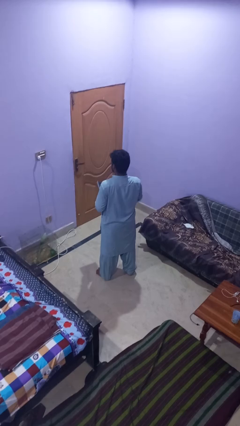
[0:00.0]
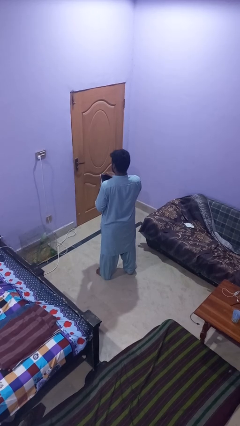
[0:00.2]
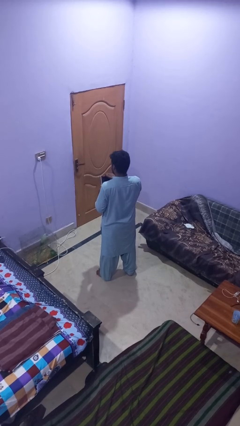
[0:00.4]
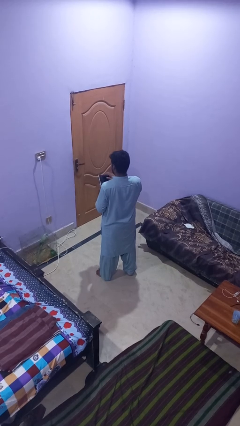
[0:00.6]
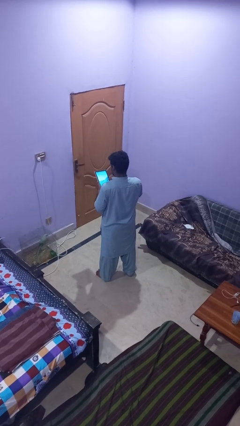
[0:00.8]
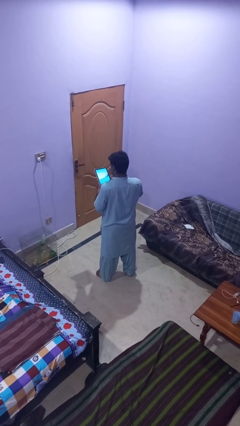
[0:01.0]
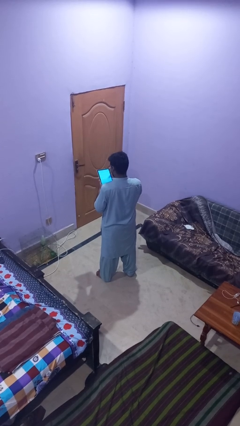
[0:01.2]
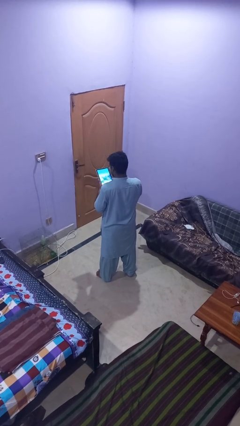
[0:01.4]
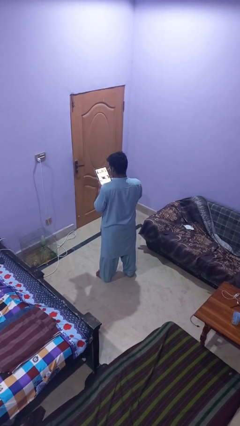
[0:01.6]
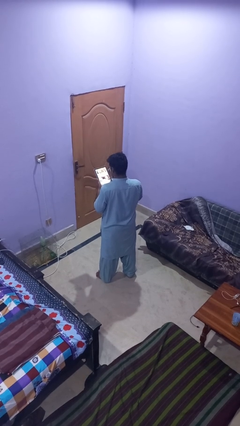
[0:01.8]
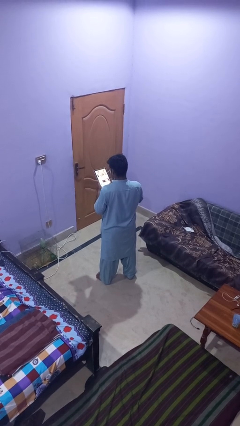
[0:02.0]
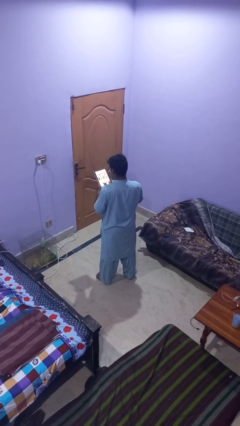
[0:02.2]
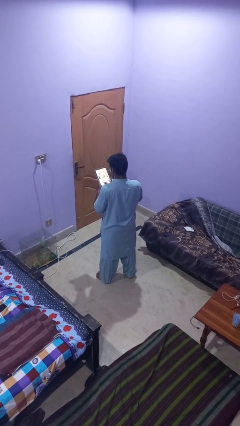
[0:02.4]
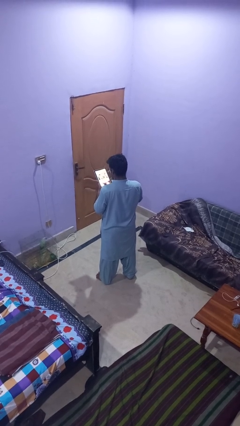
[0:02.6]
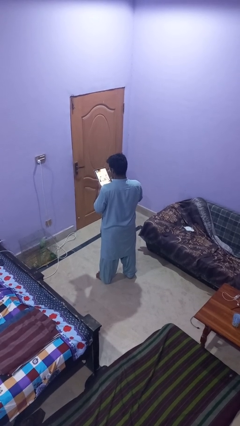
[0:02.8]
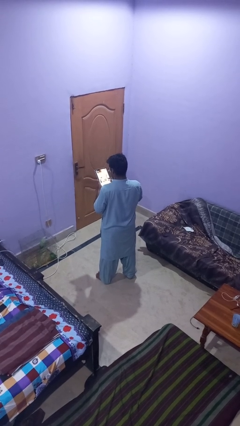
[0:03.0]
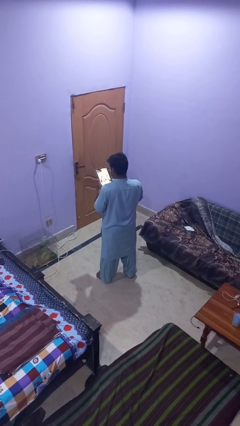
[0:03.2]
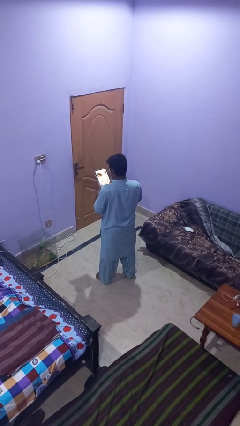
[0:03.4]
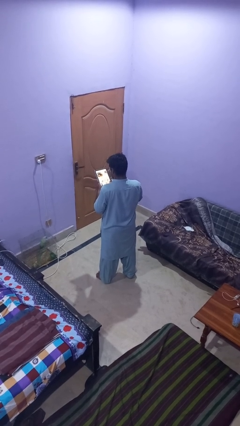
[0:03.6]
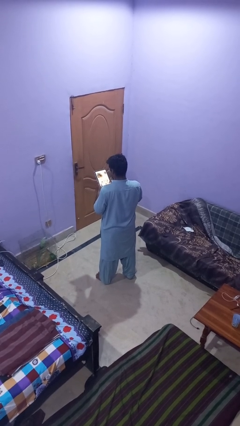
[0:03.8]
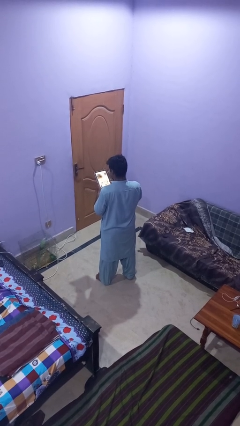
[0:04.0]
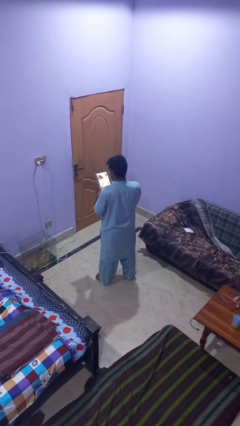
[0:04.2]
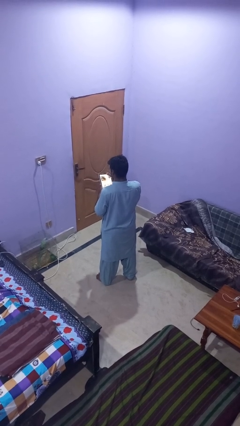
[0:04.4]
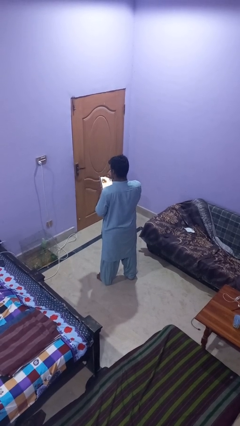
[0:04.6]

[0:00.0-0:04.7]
person interacts with tablet

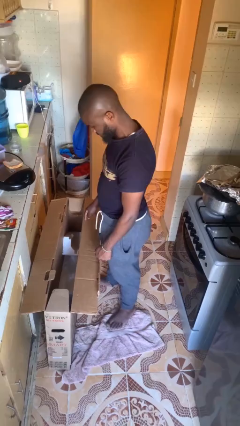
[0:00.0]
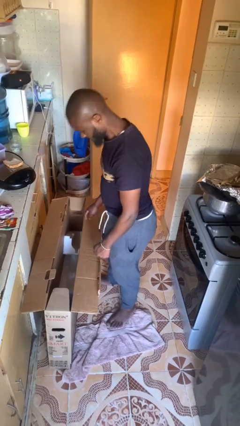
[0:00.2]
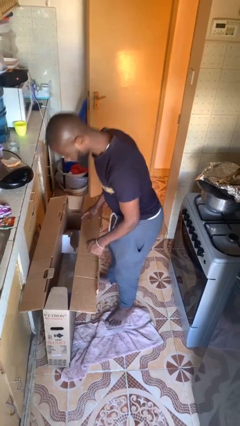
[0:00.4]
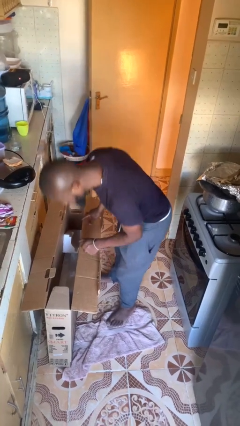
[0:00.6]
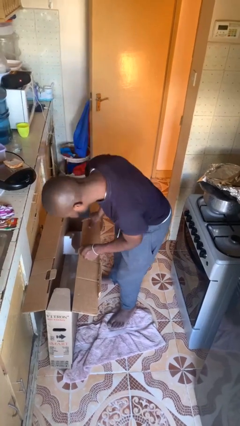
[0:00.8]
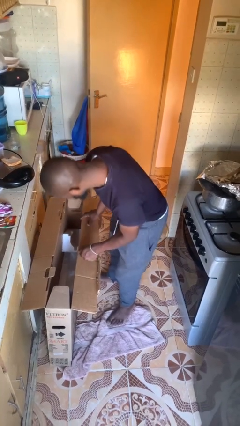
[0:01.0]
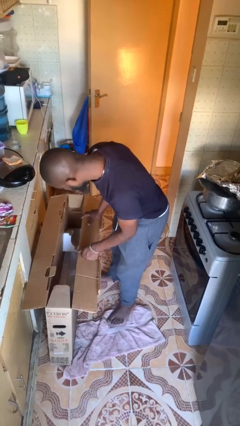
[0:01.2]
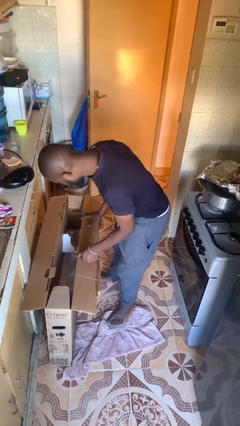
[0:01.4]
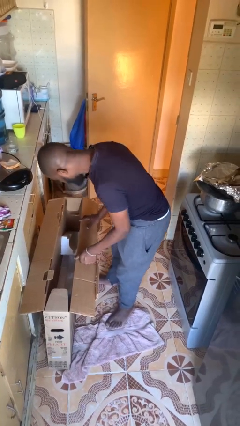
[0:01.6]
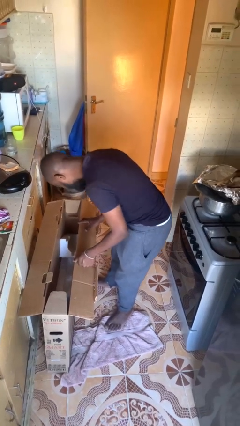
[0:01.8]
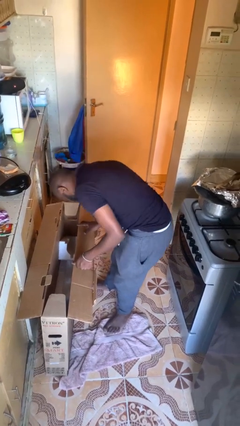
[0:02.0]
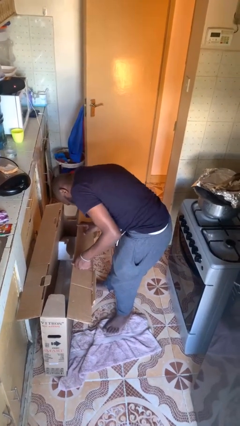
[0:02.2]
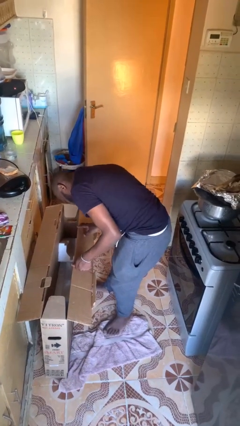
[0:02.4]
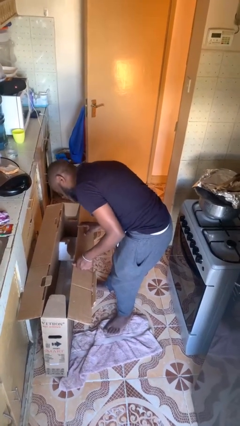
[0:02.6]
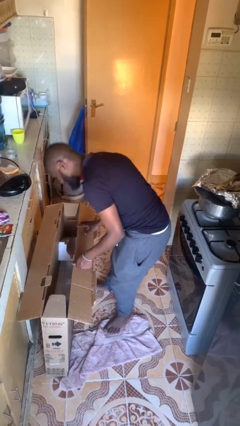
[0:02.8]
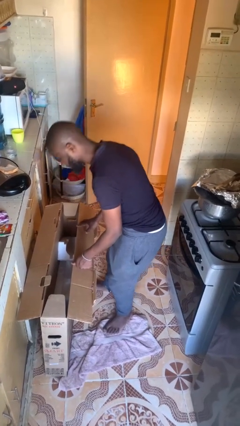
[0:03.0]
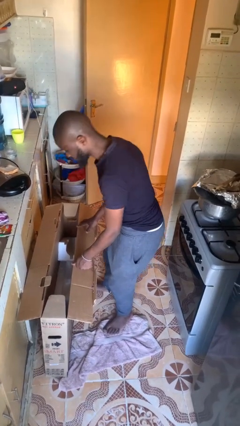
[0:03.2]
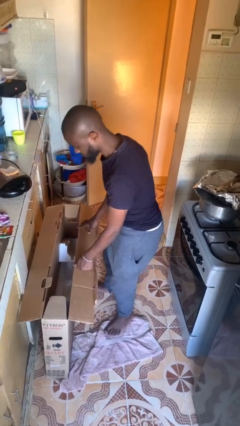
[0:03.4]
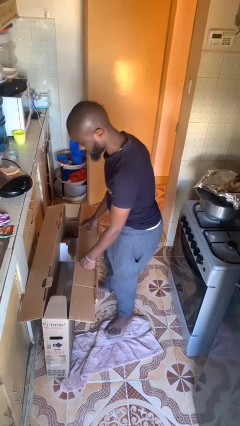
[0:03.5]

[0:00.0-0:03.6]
person searches in box

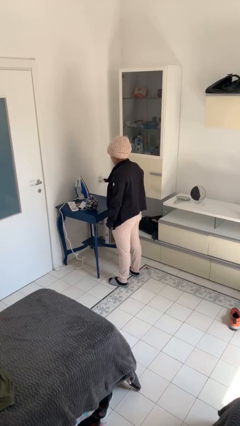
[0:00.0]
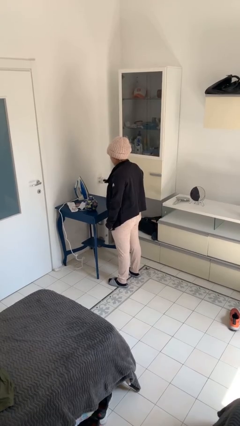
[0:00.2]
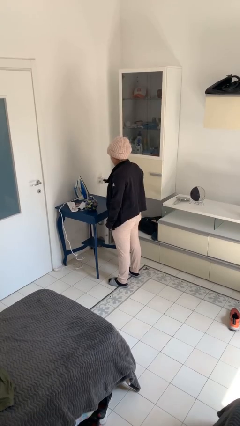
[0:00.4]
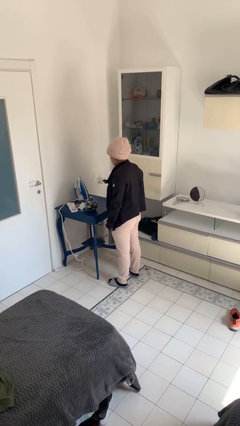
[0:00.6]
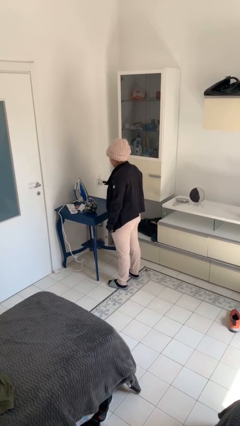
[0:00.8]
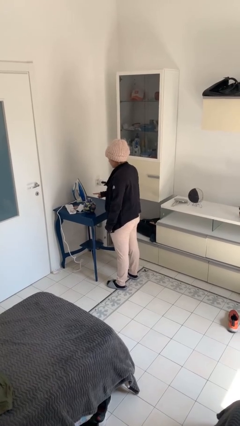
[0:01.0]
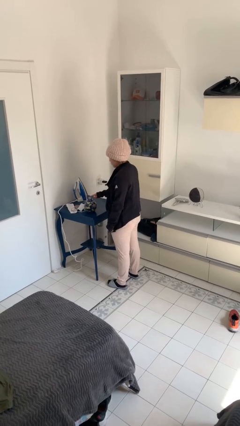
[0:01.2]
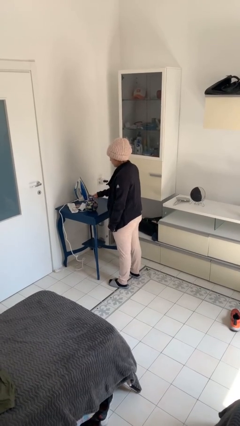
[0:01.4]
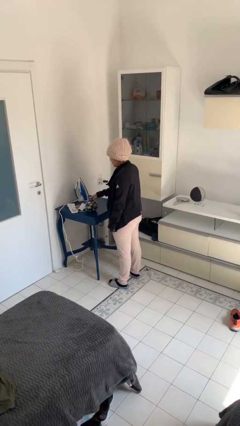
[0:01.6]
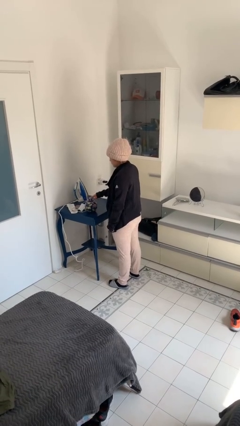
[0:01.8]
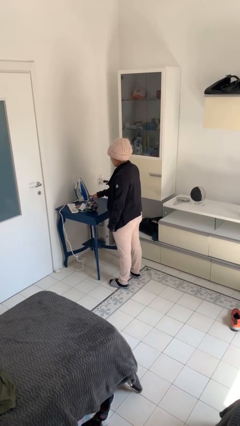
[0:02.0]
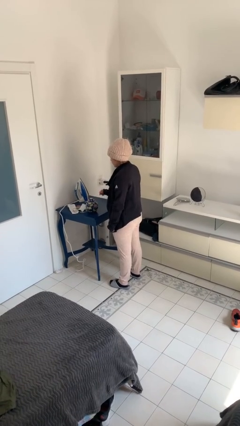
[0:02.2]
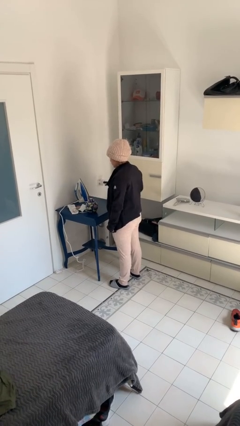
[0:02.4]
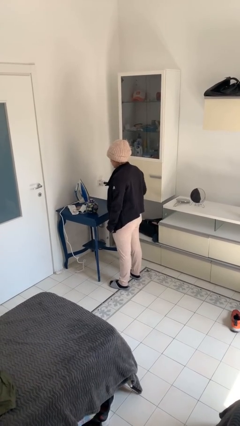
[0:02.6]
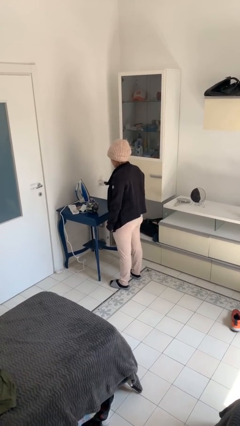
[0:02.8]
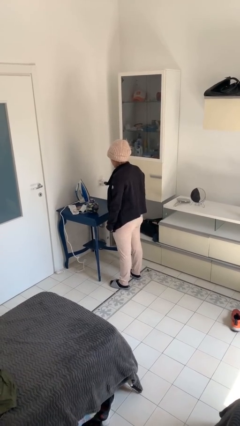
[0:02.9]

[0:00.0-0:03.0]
person taps object with finger

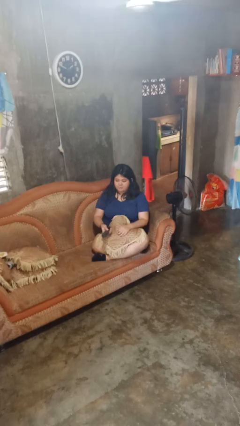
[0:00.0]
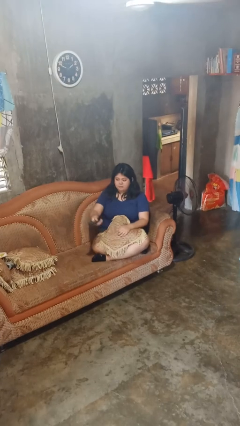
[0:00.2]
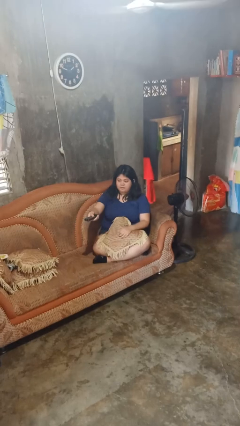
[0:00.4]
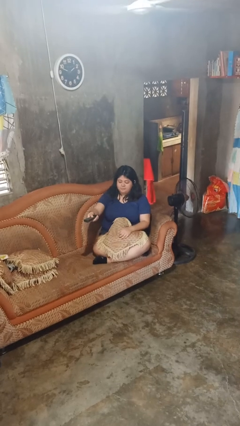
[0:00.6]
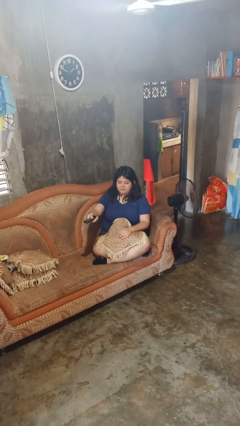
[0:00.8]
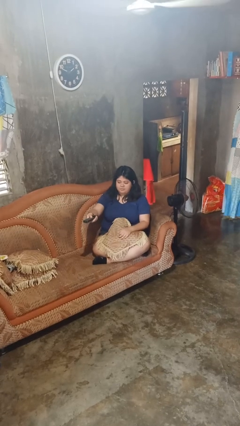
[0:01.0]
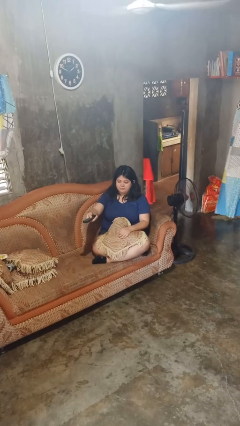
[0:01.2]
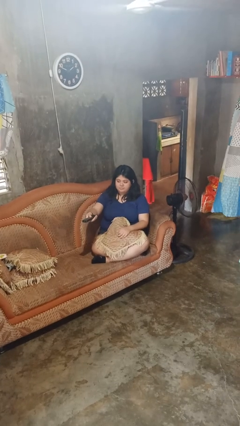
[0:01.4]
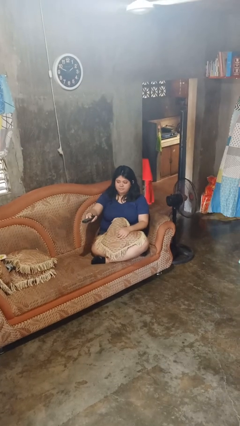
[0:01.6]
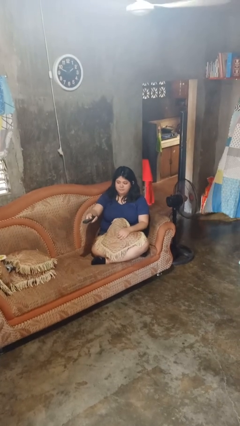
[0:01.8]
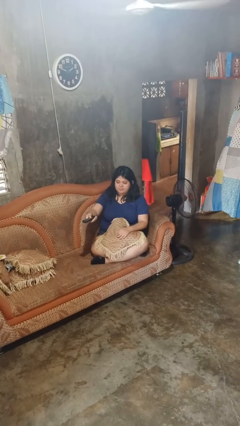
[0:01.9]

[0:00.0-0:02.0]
person uses television remote

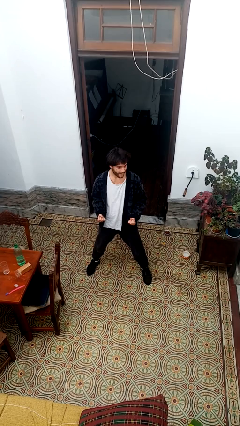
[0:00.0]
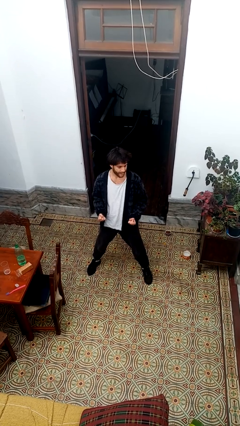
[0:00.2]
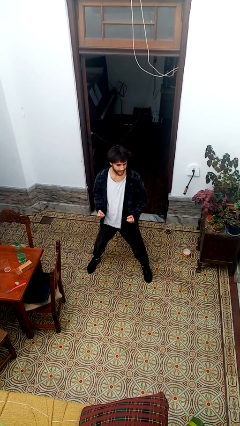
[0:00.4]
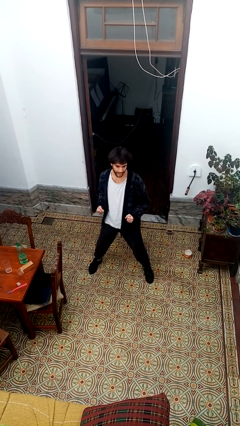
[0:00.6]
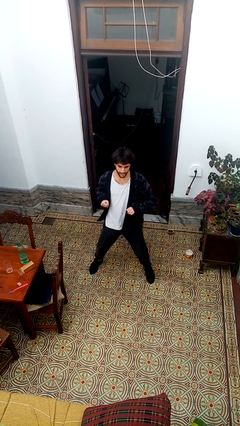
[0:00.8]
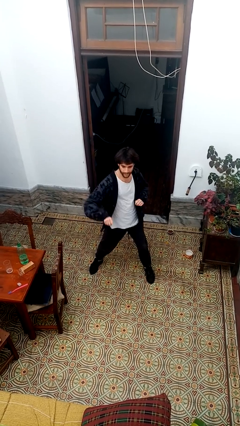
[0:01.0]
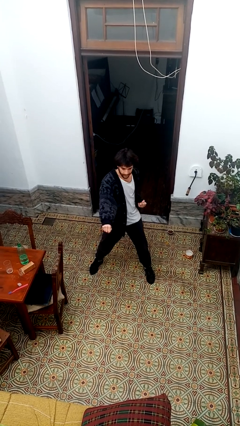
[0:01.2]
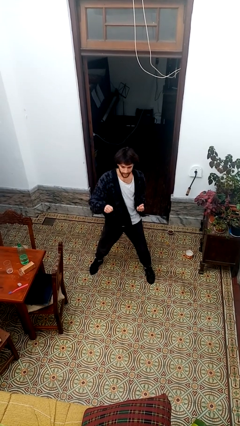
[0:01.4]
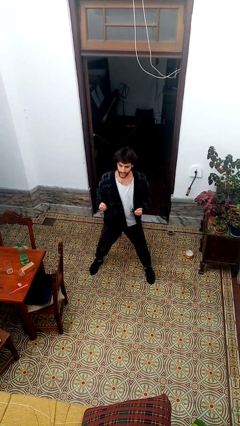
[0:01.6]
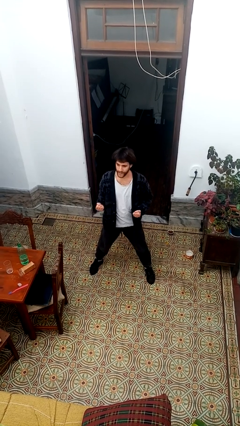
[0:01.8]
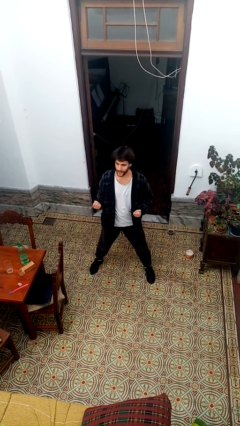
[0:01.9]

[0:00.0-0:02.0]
person punches

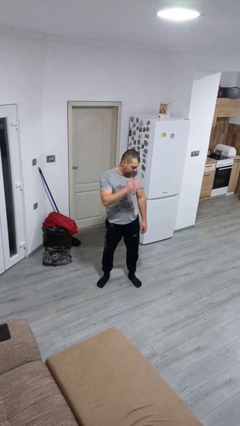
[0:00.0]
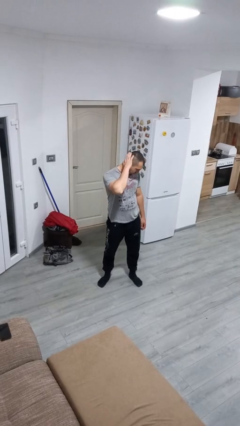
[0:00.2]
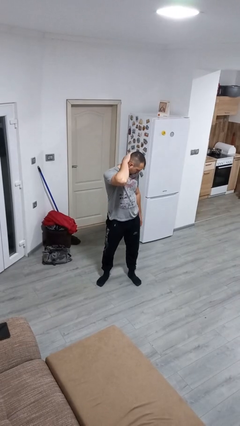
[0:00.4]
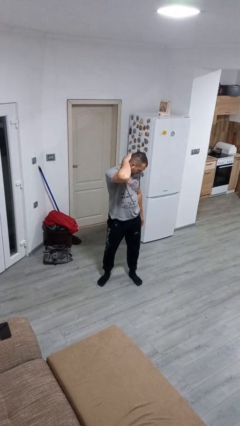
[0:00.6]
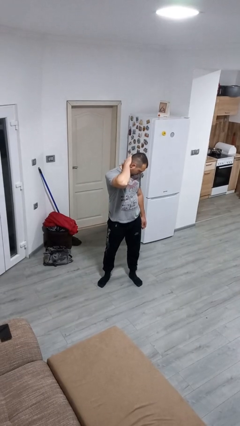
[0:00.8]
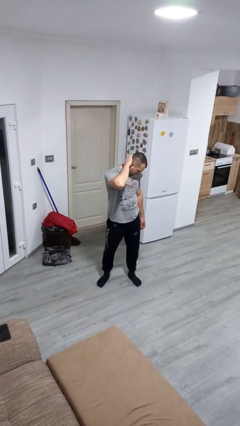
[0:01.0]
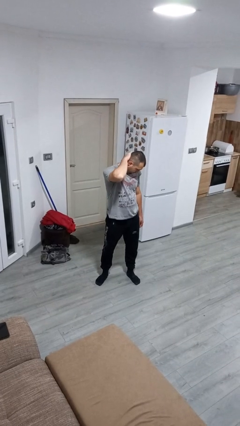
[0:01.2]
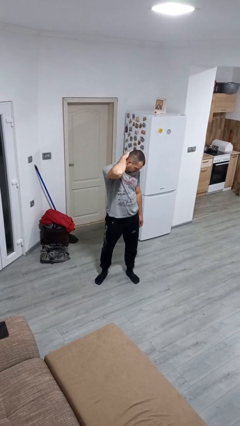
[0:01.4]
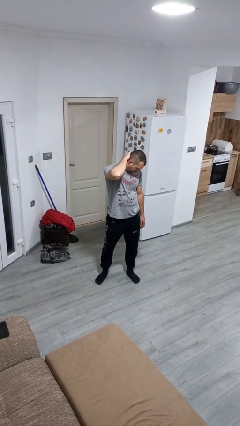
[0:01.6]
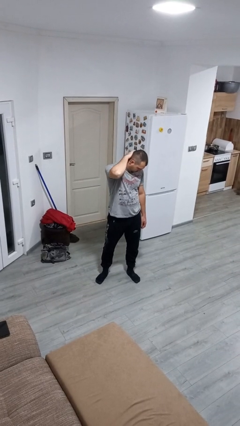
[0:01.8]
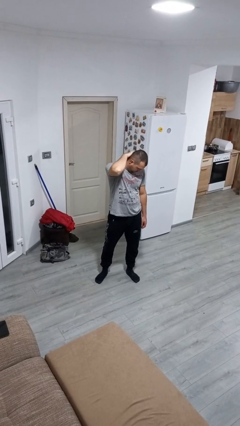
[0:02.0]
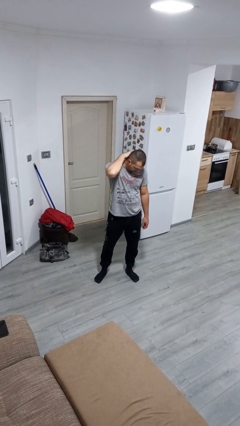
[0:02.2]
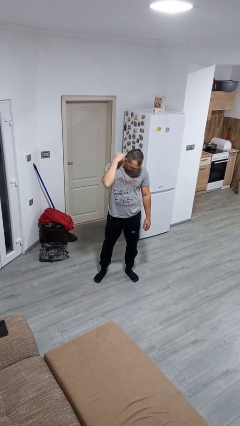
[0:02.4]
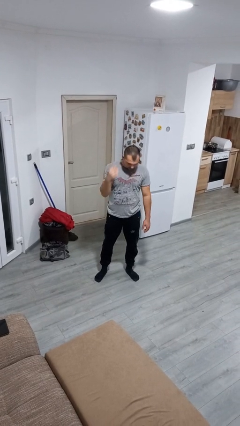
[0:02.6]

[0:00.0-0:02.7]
person rubs neck
